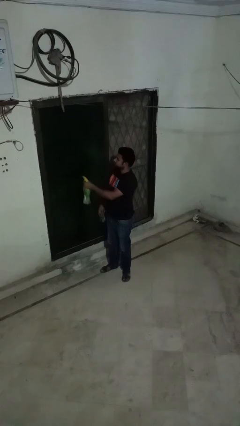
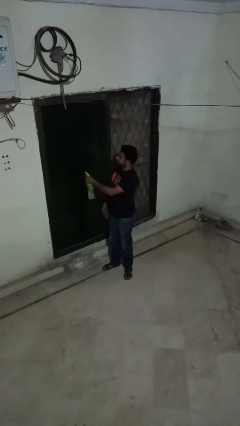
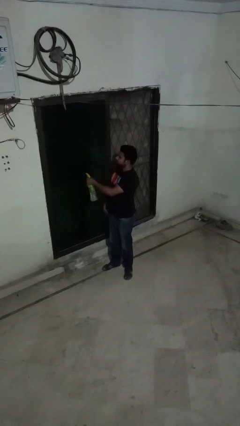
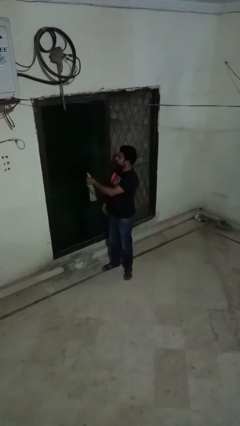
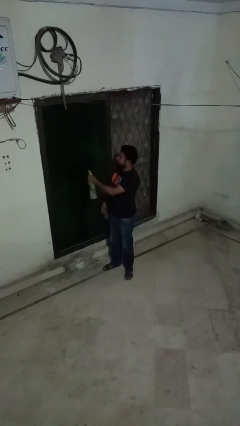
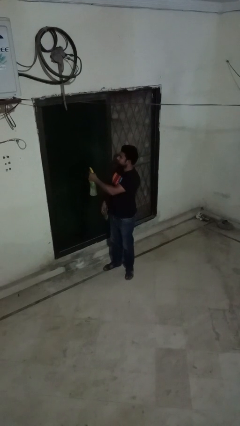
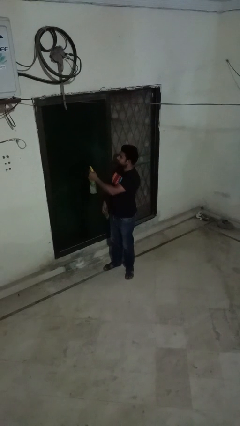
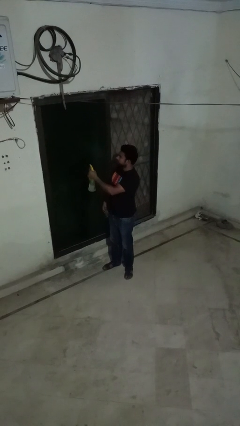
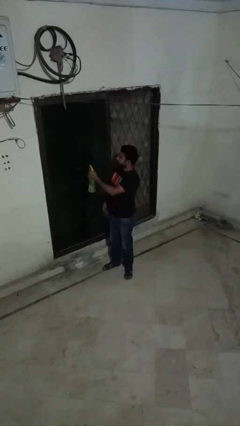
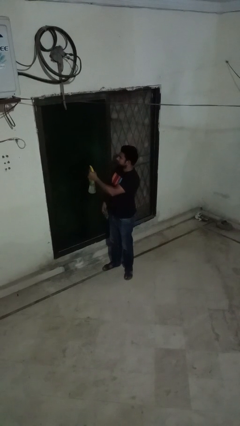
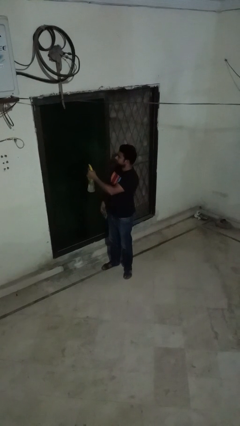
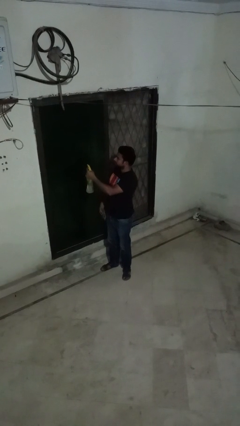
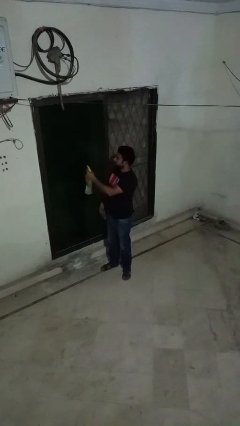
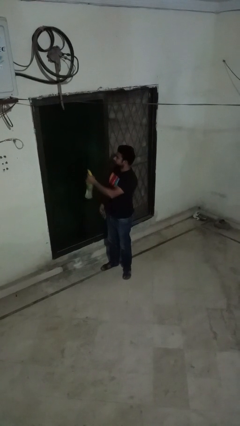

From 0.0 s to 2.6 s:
person sprays from bottle

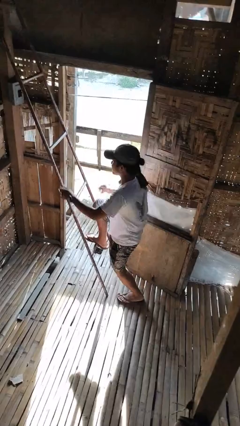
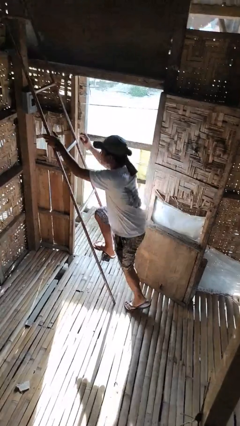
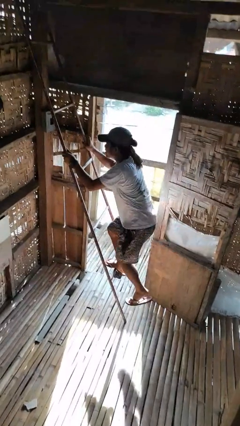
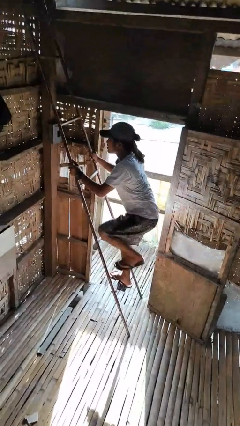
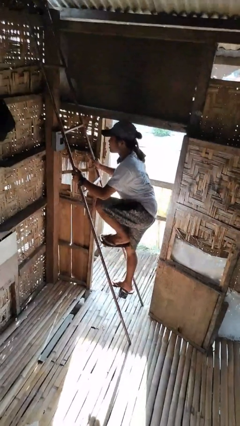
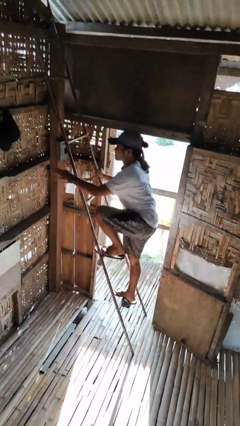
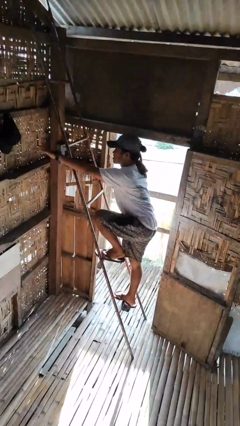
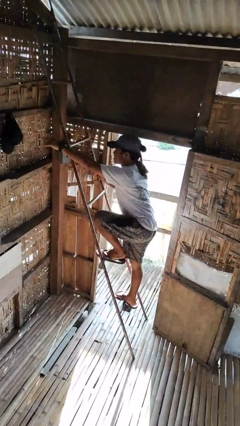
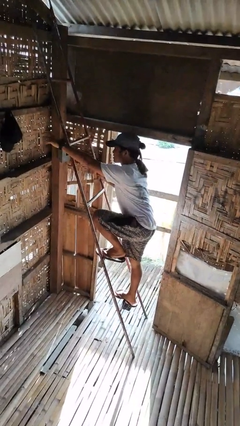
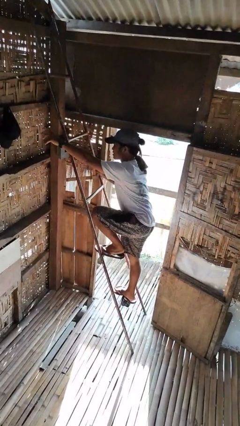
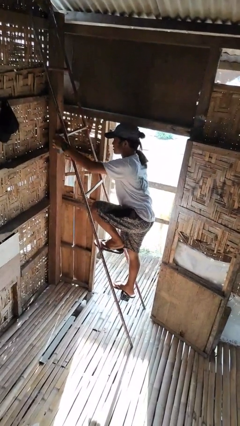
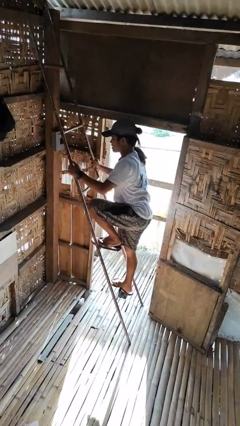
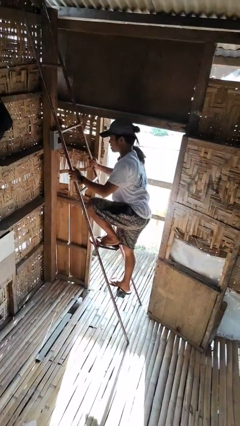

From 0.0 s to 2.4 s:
person climbs up ladder

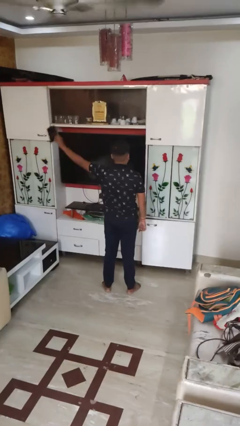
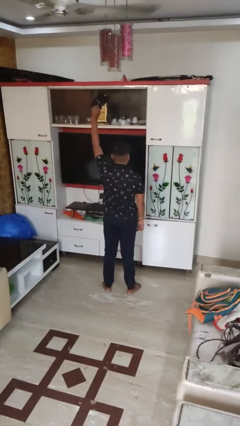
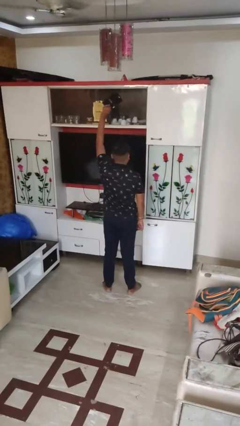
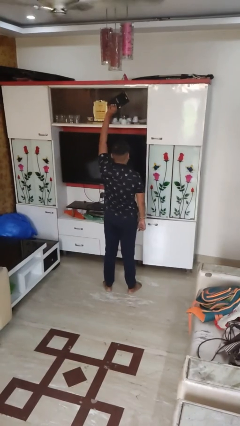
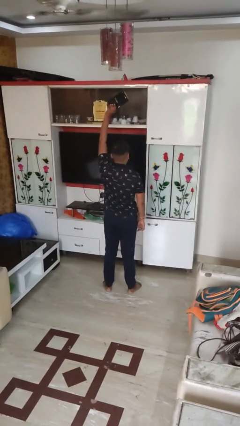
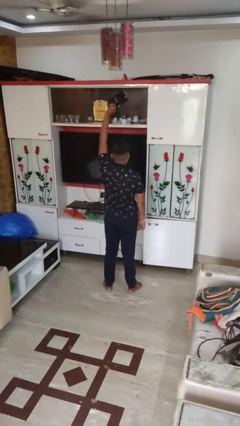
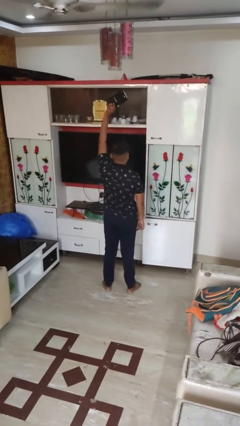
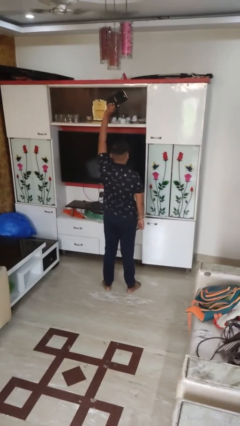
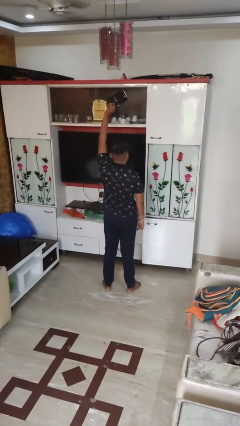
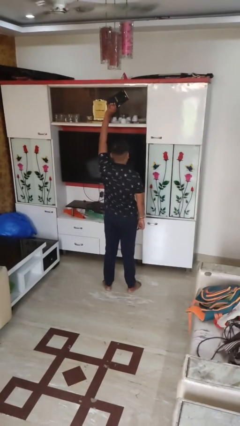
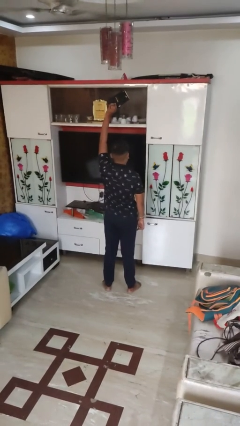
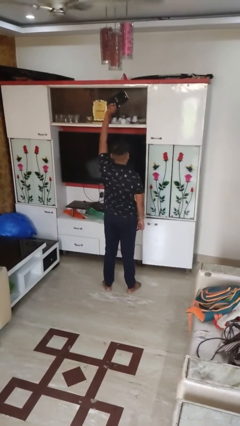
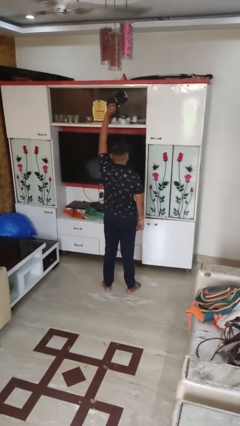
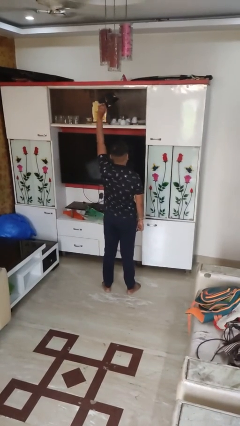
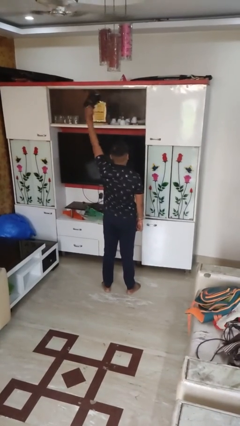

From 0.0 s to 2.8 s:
person holds object above head

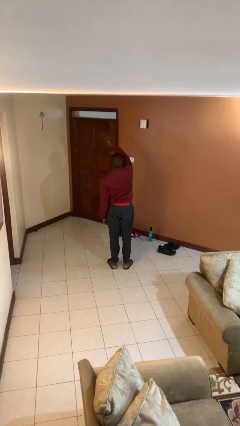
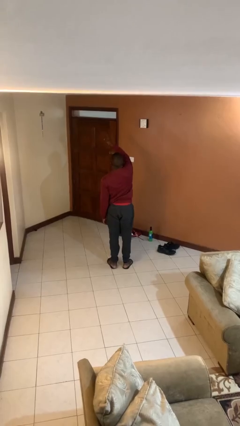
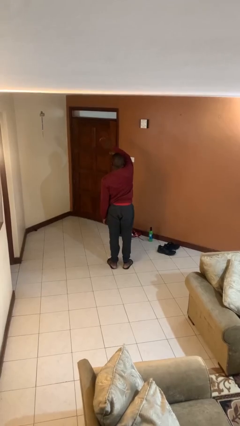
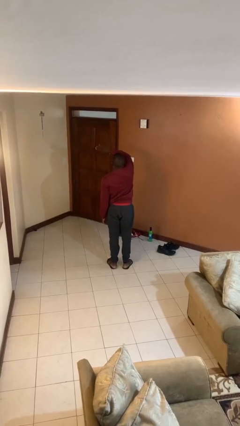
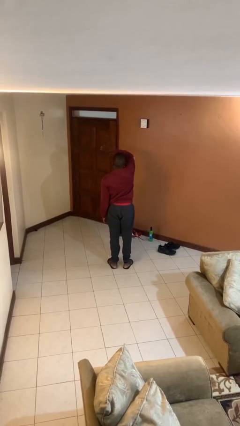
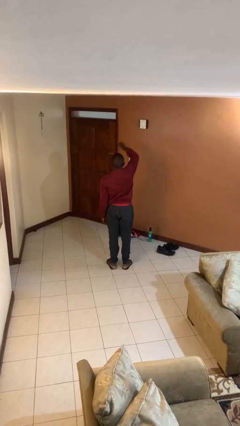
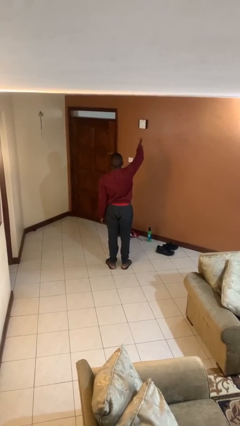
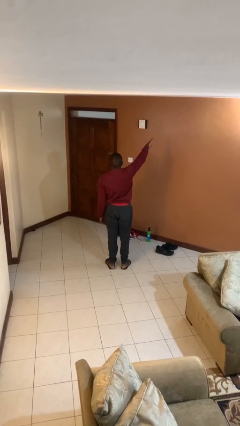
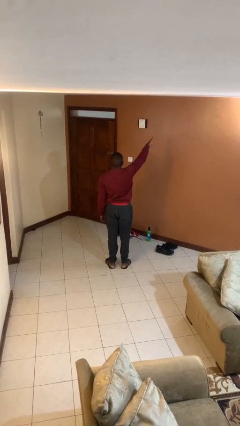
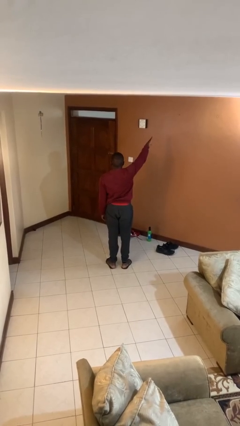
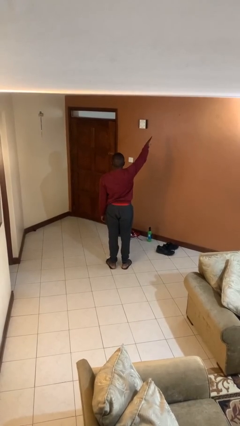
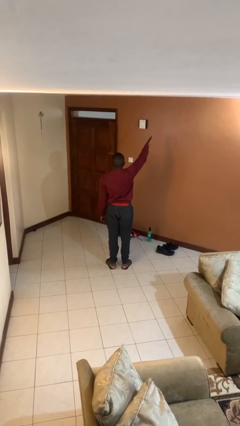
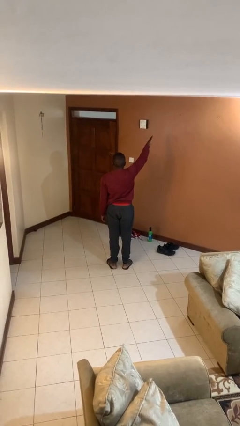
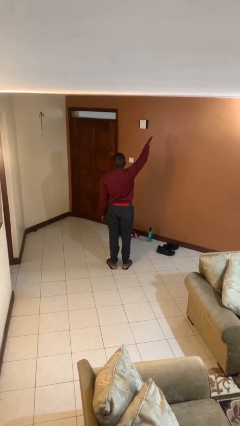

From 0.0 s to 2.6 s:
person gestures swipe right

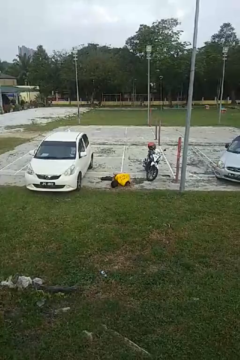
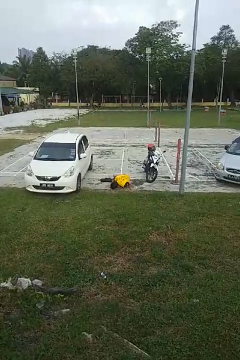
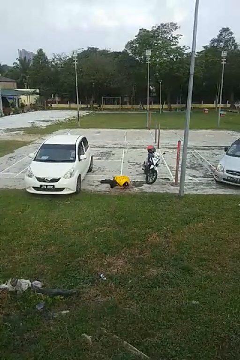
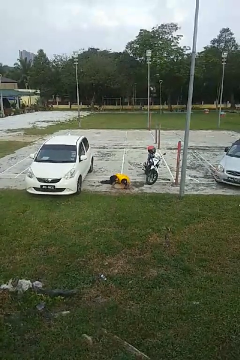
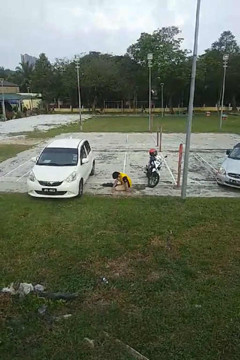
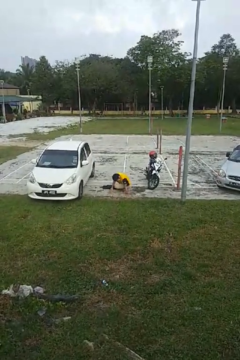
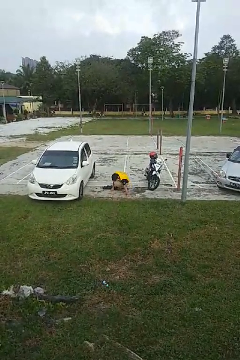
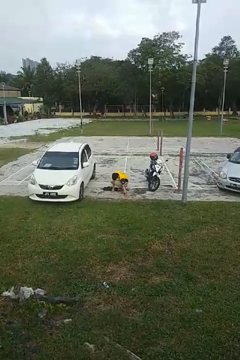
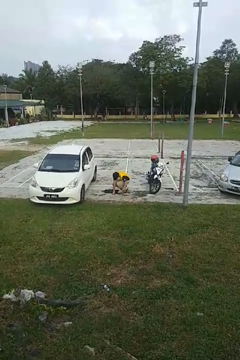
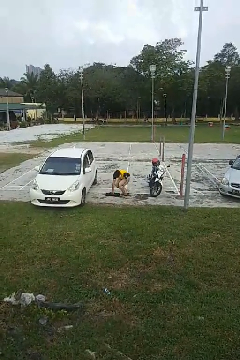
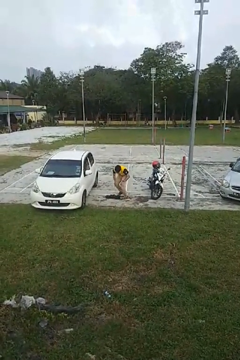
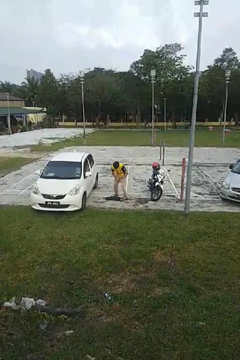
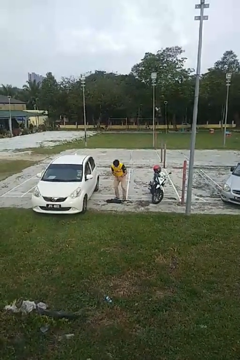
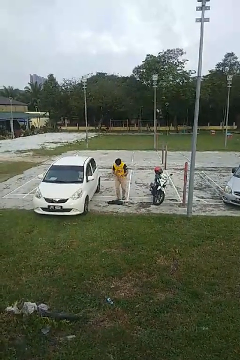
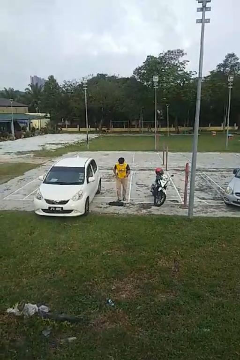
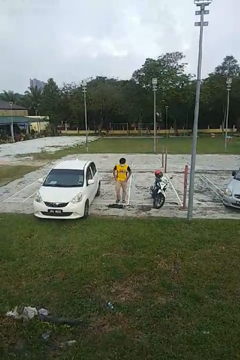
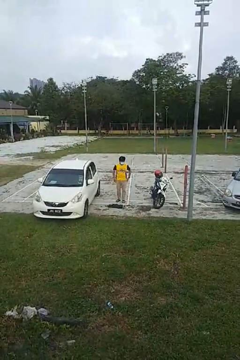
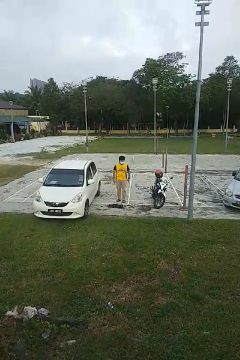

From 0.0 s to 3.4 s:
person stands up from floor

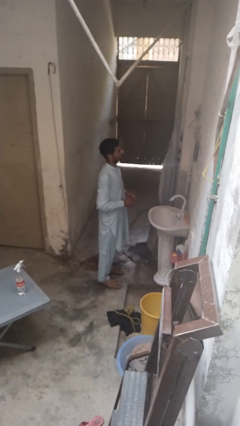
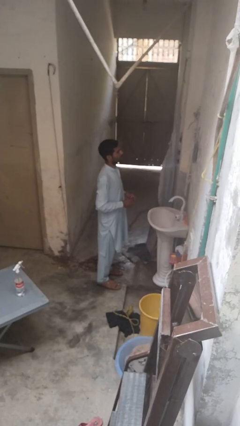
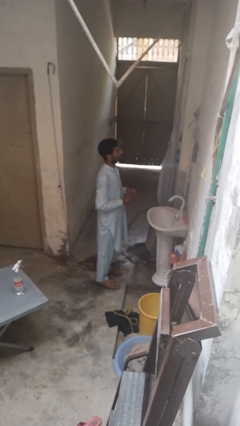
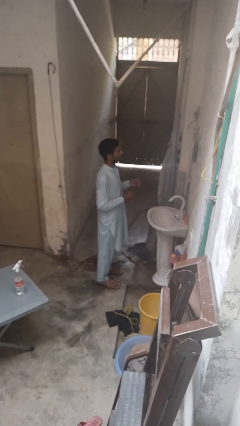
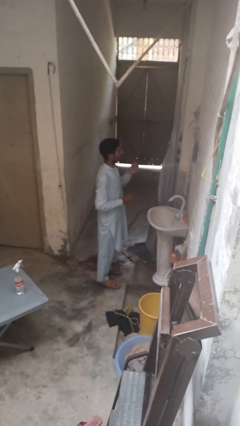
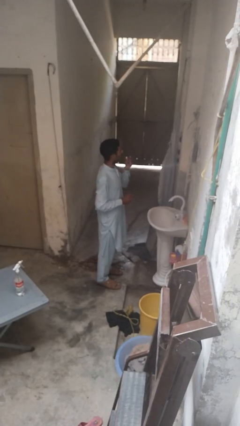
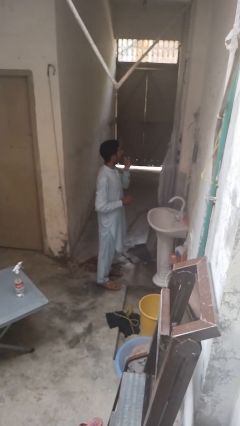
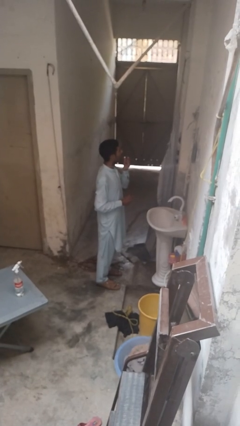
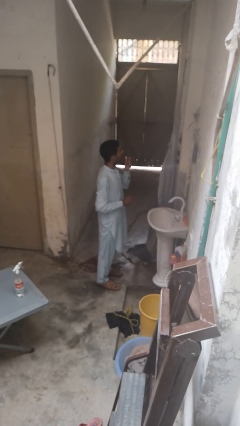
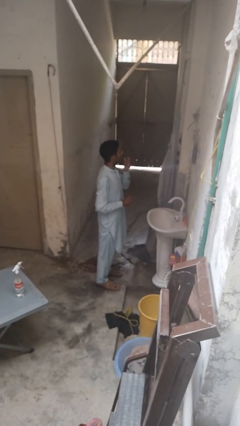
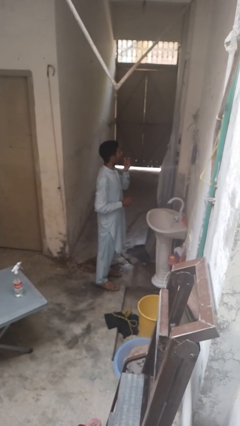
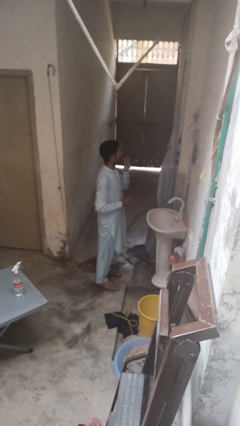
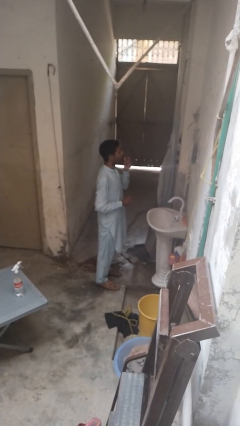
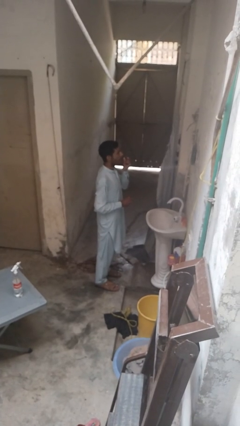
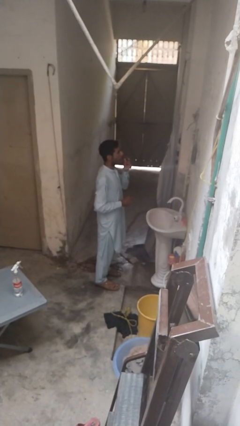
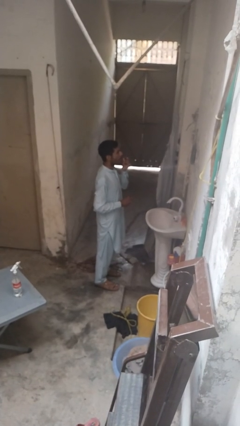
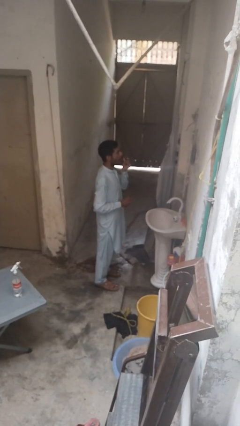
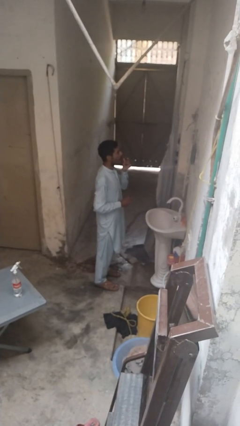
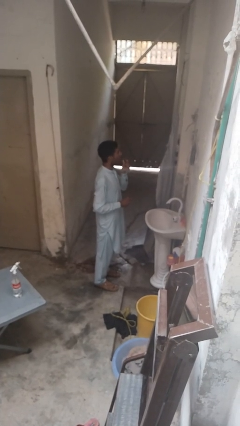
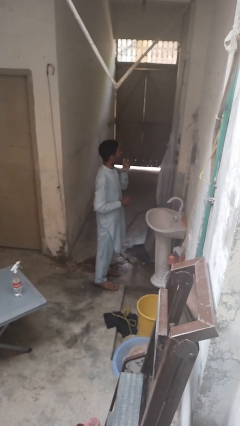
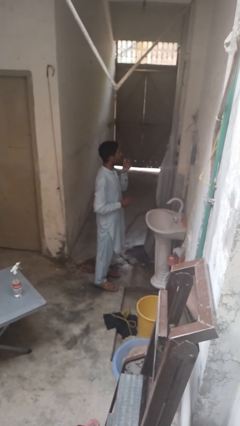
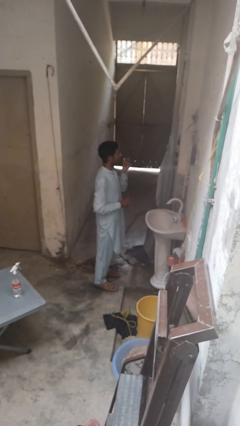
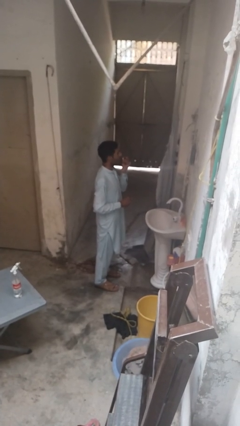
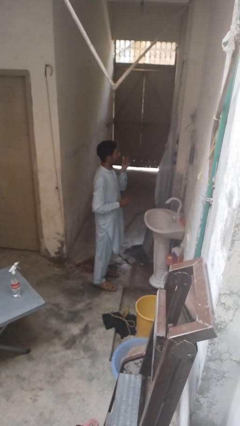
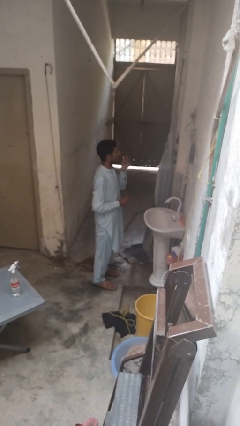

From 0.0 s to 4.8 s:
person applies lip makeup
